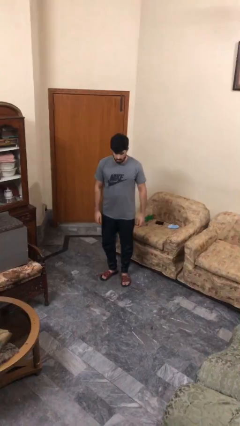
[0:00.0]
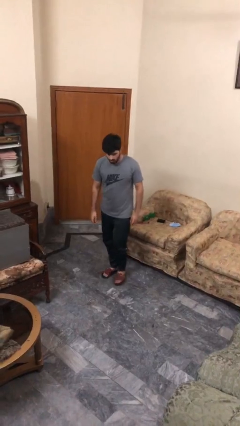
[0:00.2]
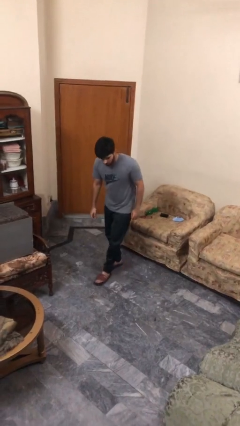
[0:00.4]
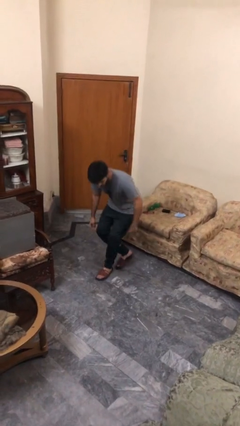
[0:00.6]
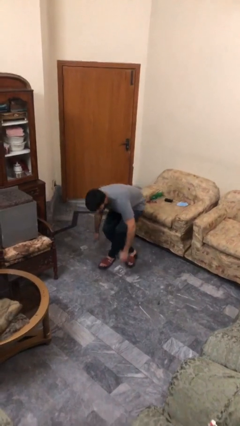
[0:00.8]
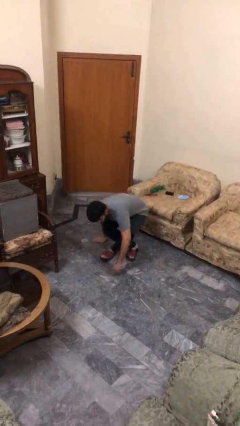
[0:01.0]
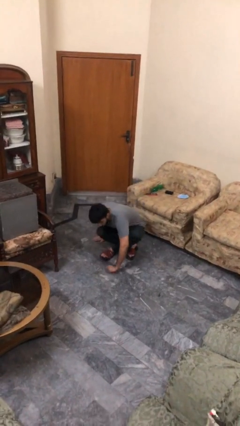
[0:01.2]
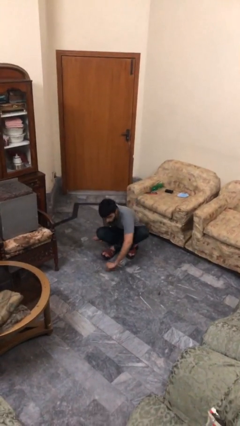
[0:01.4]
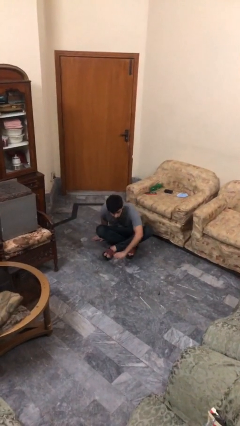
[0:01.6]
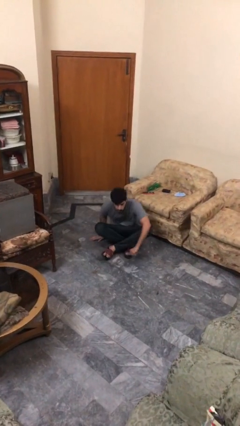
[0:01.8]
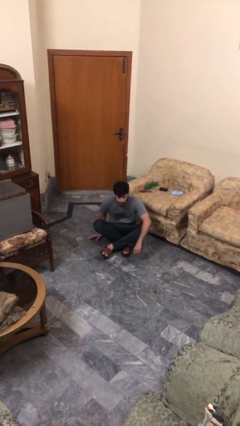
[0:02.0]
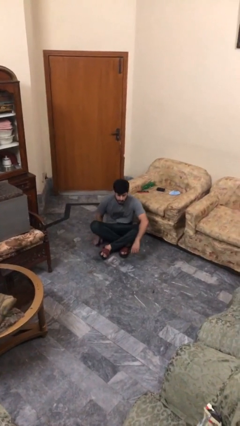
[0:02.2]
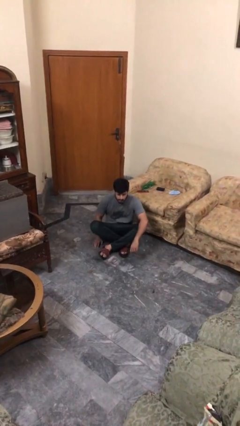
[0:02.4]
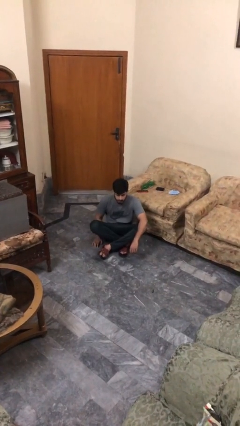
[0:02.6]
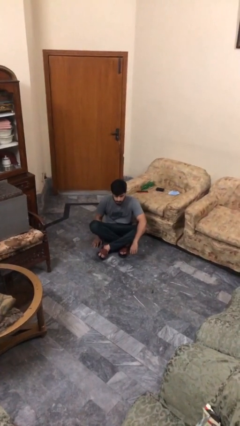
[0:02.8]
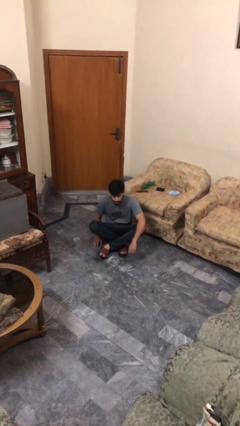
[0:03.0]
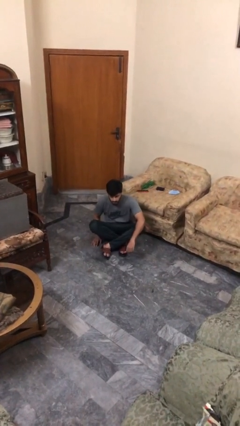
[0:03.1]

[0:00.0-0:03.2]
person sits crisscross

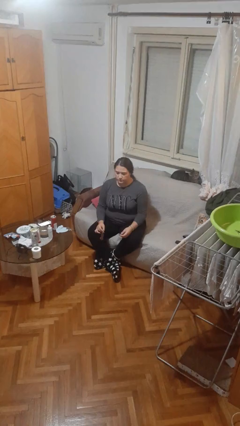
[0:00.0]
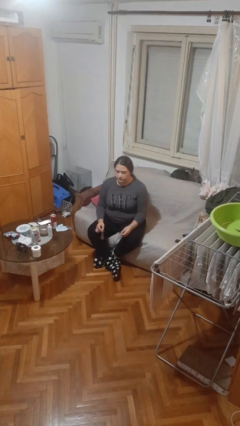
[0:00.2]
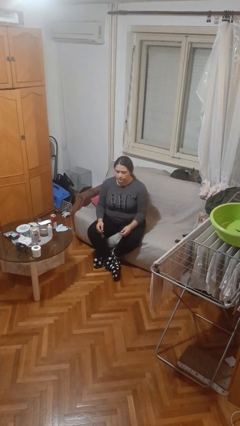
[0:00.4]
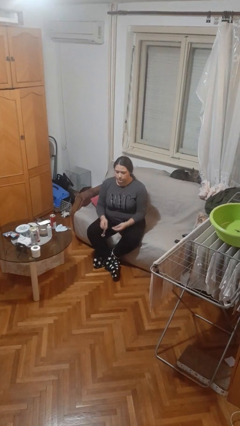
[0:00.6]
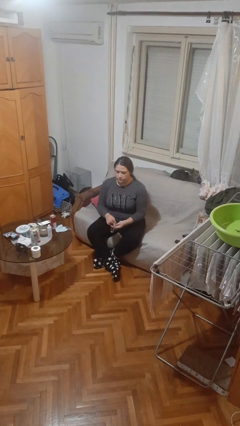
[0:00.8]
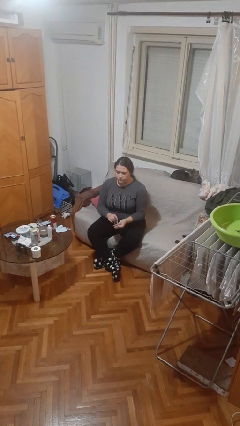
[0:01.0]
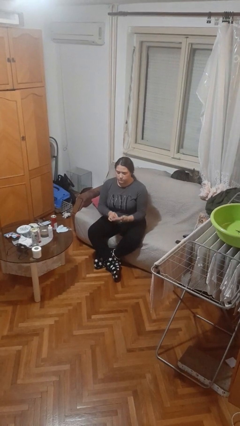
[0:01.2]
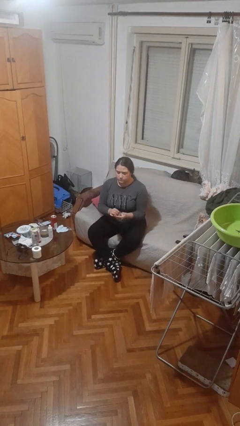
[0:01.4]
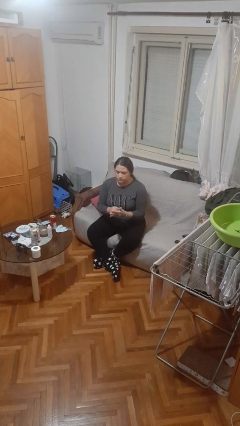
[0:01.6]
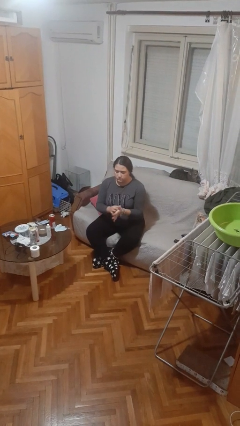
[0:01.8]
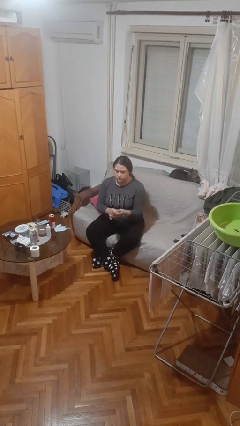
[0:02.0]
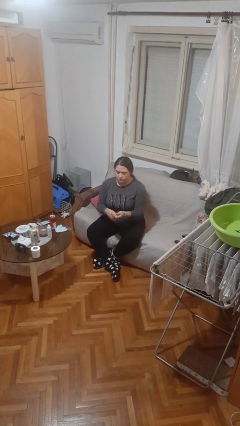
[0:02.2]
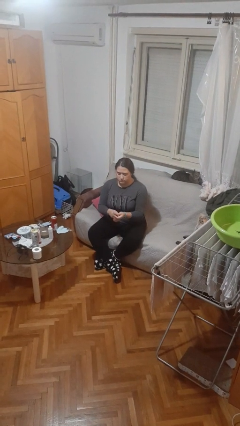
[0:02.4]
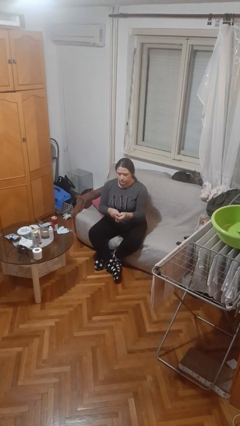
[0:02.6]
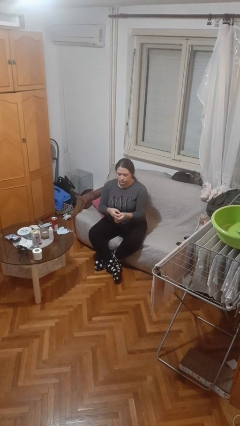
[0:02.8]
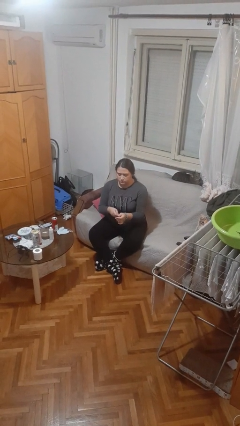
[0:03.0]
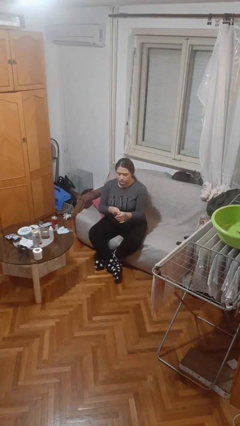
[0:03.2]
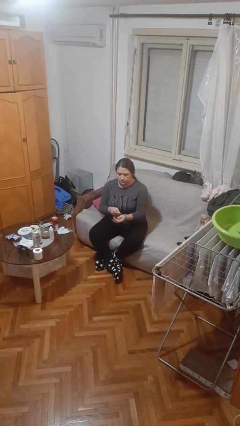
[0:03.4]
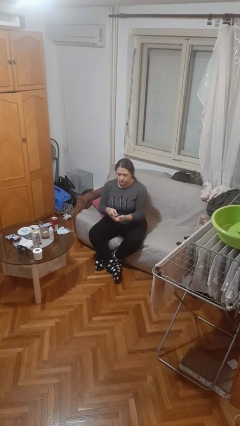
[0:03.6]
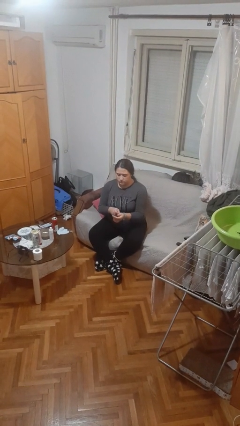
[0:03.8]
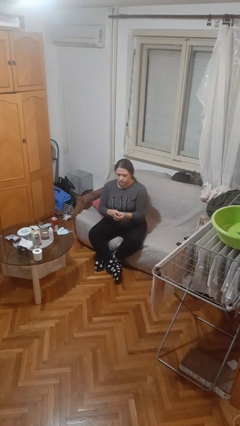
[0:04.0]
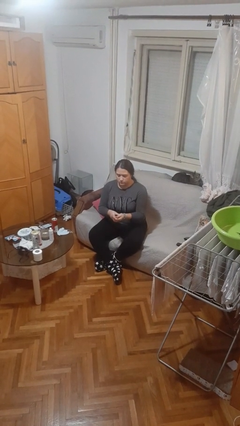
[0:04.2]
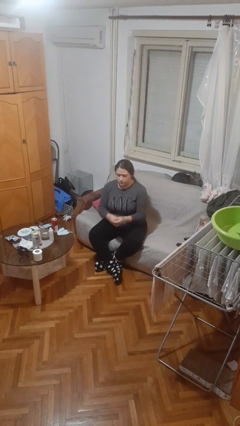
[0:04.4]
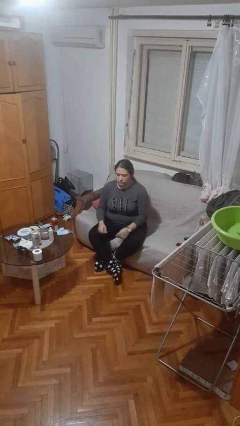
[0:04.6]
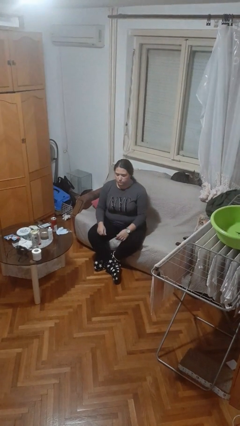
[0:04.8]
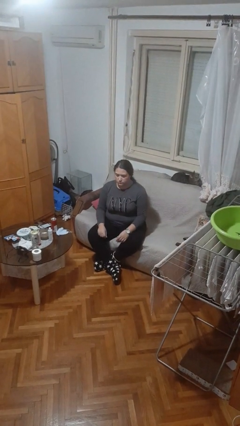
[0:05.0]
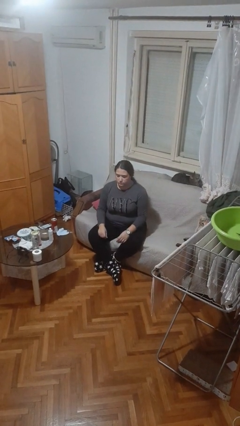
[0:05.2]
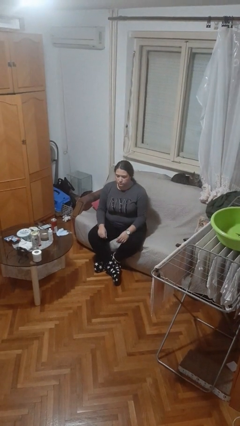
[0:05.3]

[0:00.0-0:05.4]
person puts on wristwatch

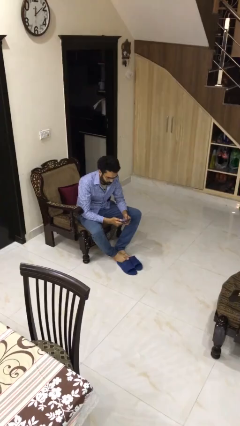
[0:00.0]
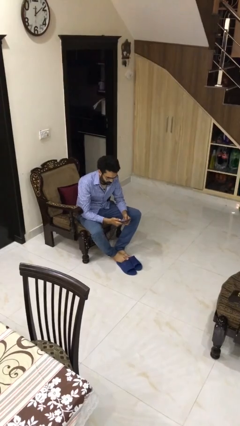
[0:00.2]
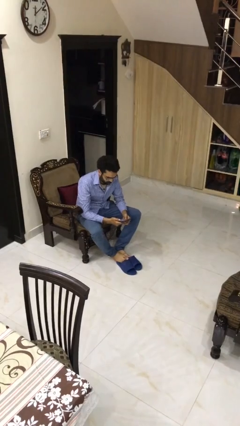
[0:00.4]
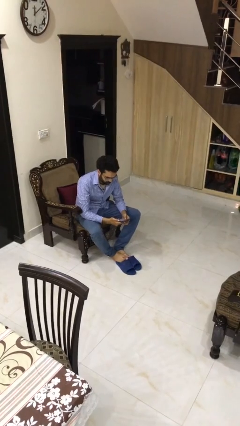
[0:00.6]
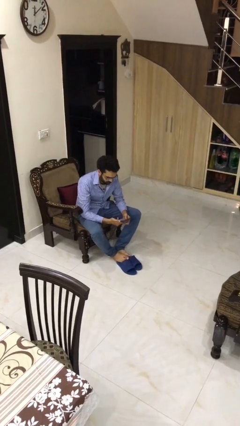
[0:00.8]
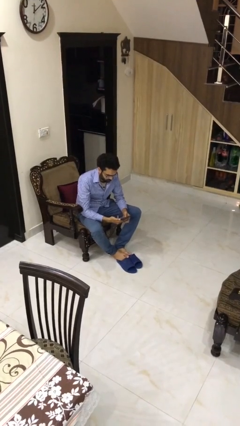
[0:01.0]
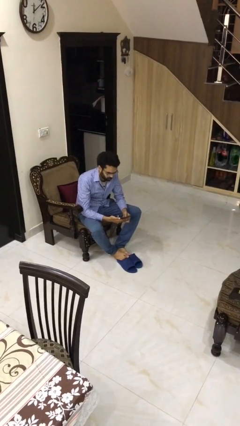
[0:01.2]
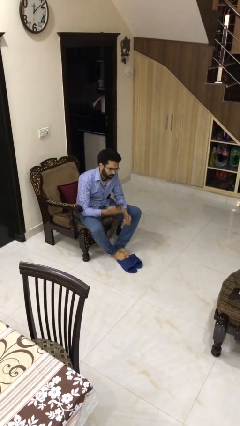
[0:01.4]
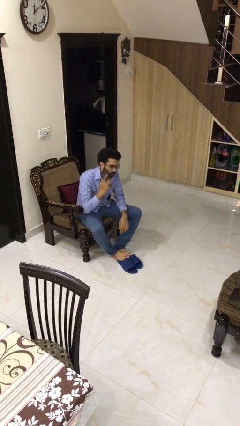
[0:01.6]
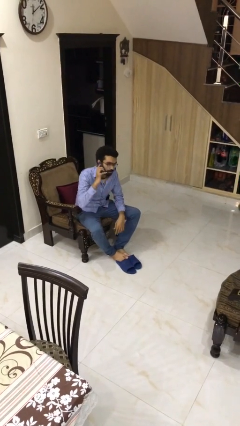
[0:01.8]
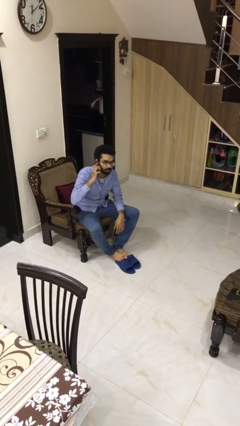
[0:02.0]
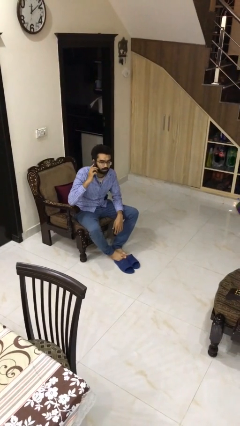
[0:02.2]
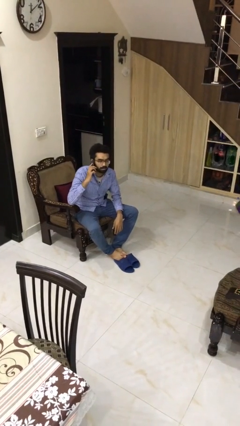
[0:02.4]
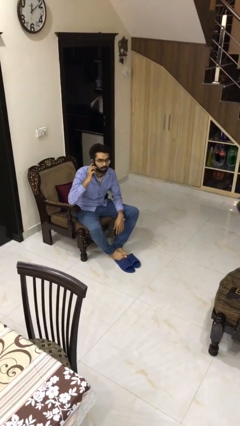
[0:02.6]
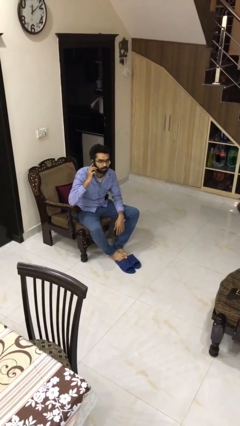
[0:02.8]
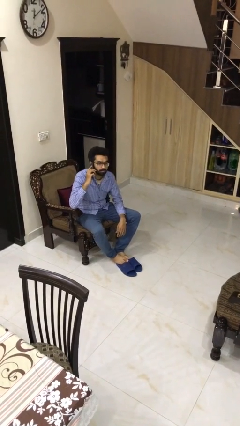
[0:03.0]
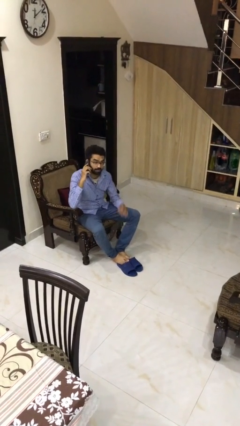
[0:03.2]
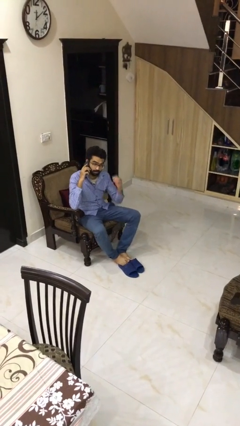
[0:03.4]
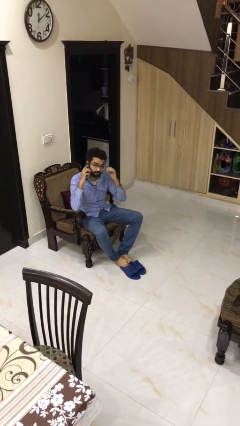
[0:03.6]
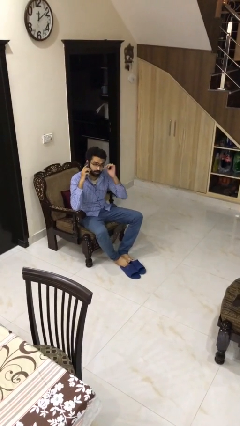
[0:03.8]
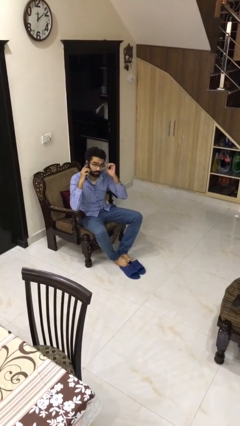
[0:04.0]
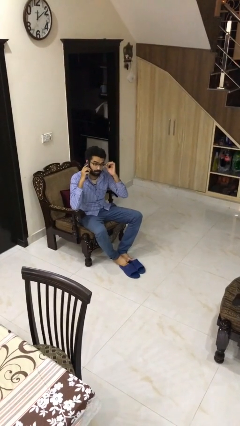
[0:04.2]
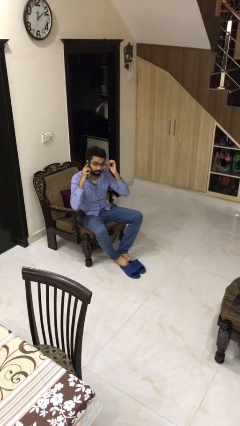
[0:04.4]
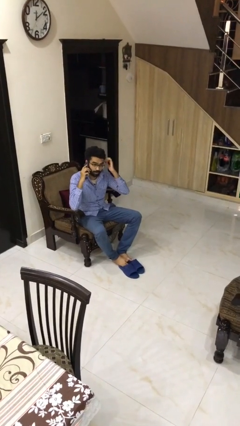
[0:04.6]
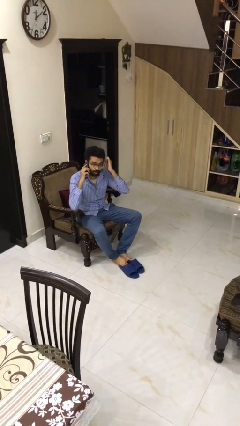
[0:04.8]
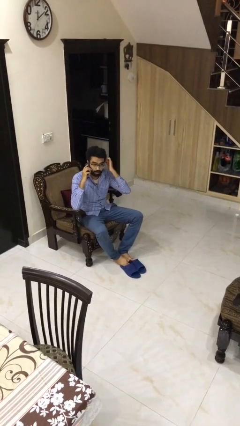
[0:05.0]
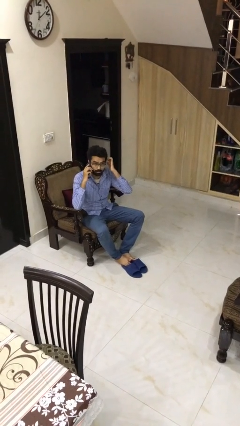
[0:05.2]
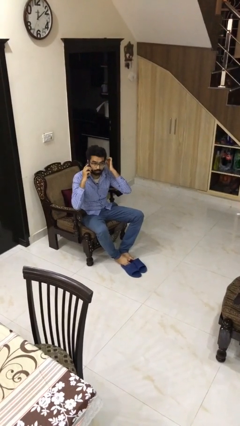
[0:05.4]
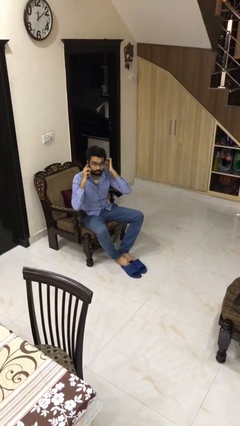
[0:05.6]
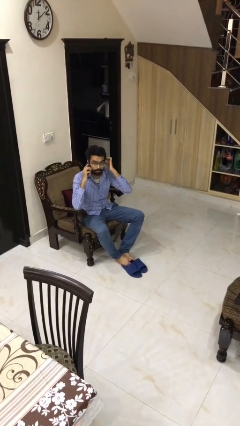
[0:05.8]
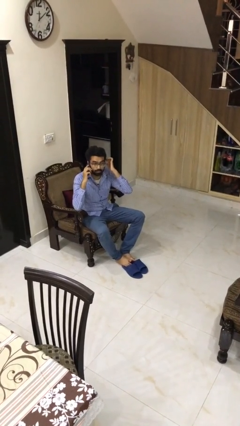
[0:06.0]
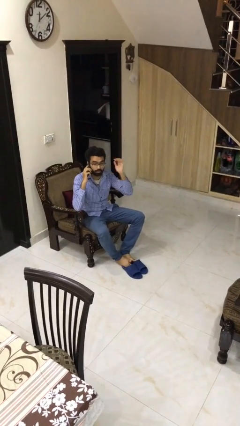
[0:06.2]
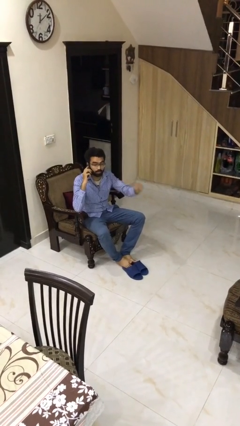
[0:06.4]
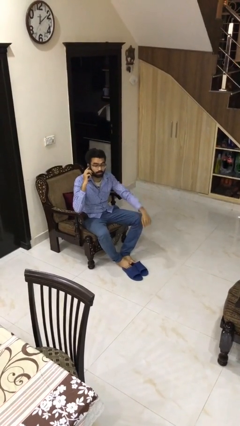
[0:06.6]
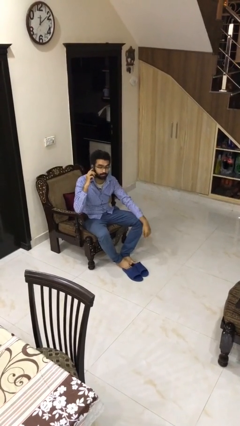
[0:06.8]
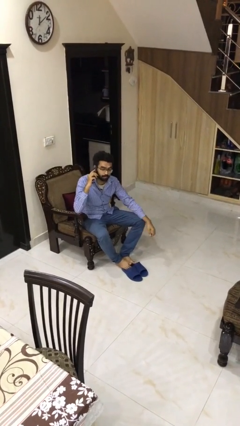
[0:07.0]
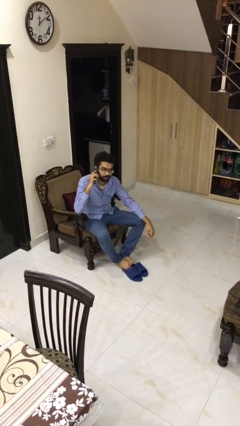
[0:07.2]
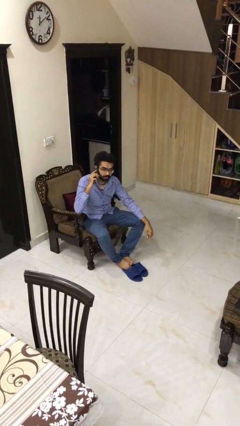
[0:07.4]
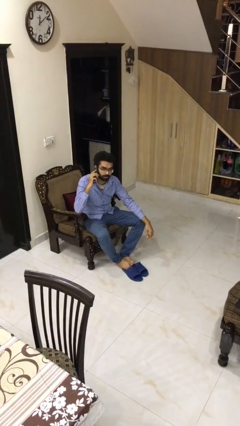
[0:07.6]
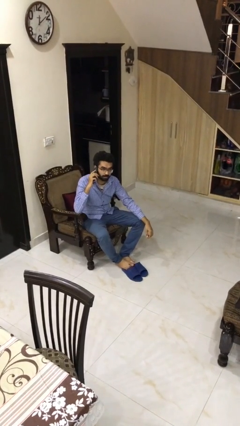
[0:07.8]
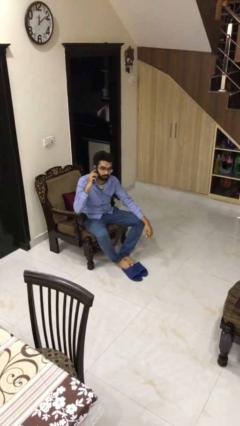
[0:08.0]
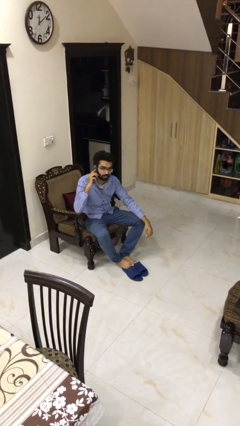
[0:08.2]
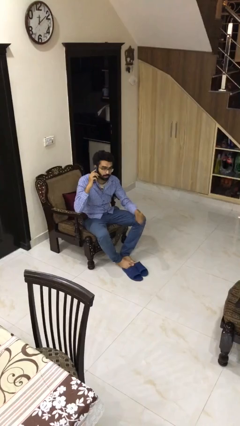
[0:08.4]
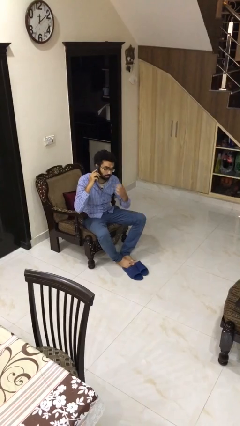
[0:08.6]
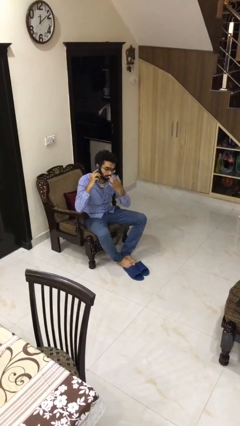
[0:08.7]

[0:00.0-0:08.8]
person talks on phone

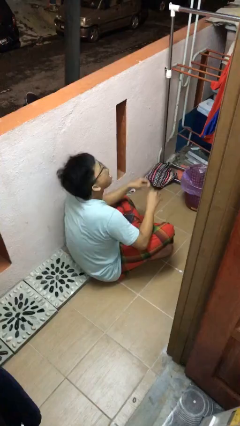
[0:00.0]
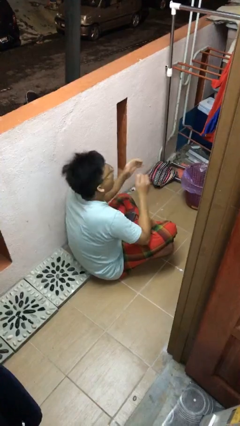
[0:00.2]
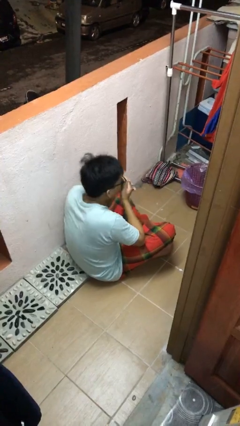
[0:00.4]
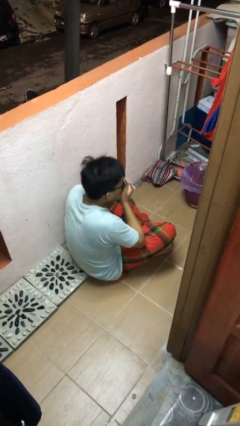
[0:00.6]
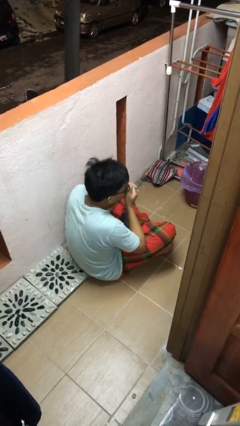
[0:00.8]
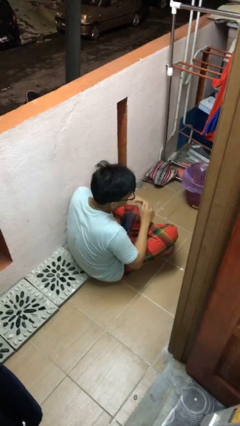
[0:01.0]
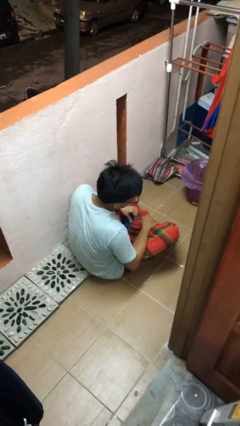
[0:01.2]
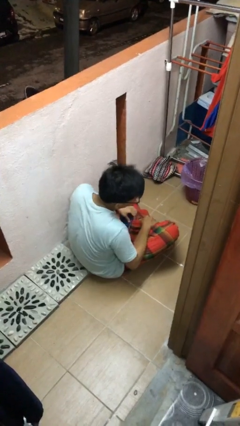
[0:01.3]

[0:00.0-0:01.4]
person sneezes into hand
